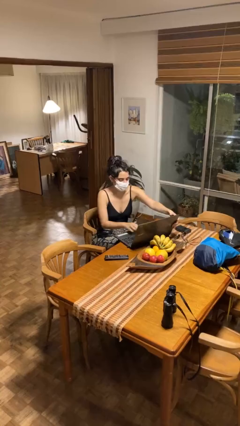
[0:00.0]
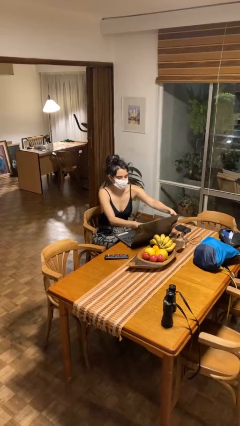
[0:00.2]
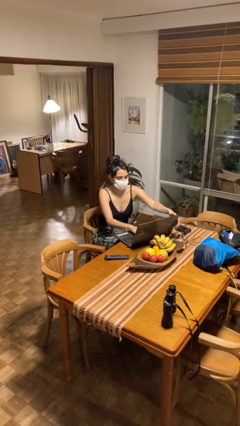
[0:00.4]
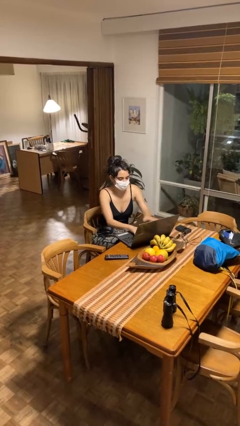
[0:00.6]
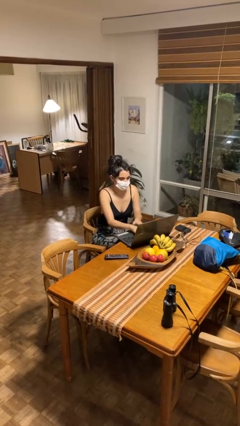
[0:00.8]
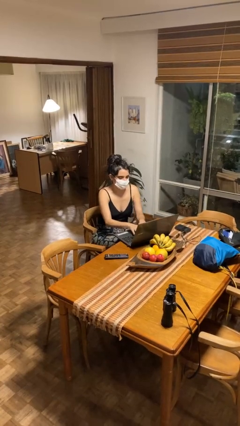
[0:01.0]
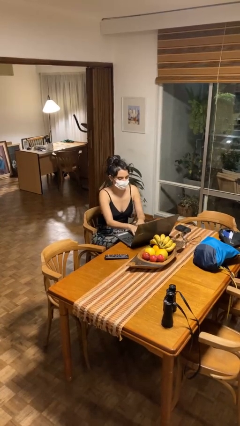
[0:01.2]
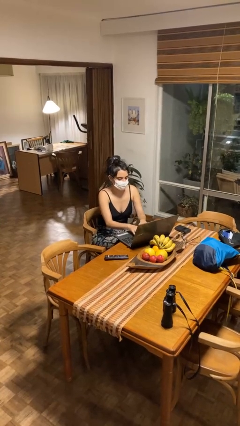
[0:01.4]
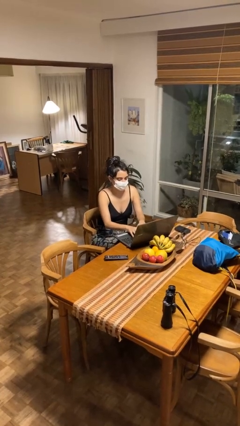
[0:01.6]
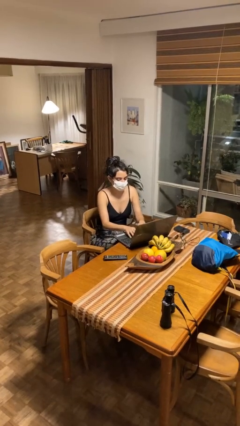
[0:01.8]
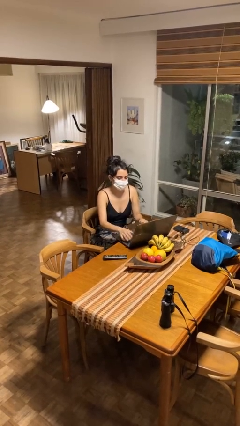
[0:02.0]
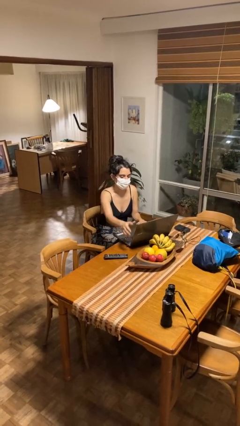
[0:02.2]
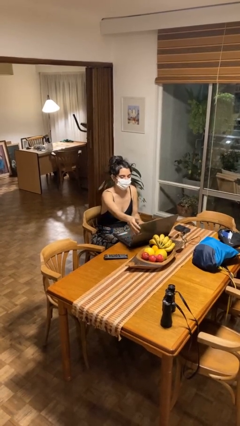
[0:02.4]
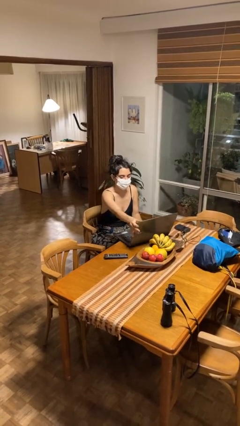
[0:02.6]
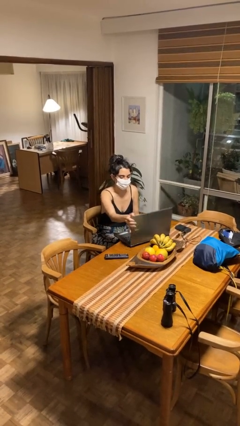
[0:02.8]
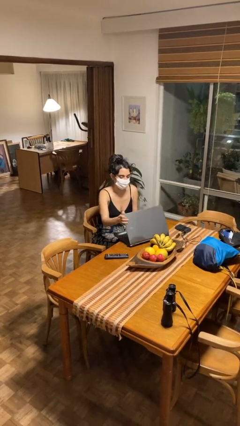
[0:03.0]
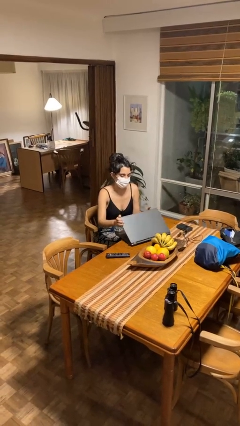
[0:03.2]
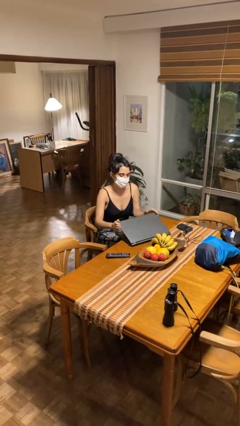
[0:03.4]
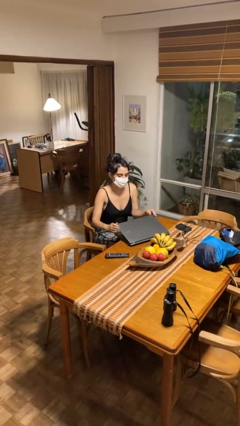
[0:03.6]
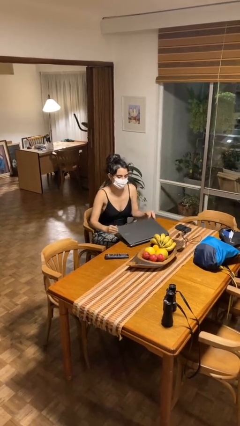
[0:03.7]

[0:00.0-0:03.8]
person interacts with laptop

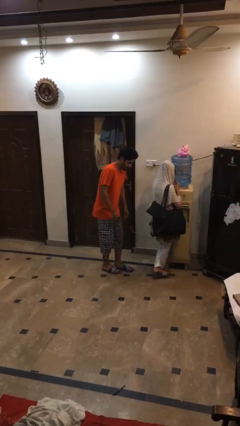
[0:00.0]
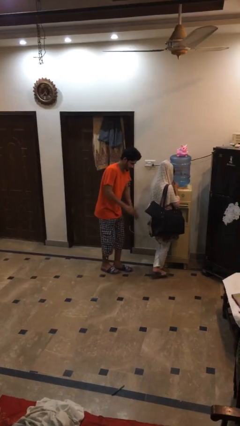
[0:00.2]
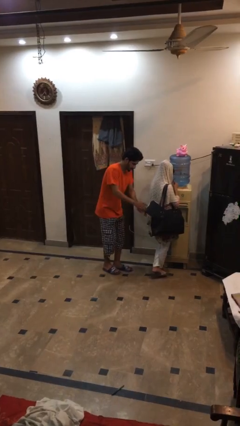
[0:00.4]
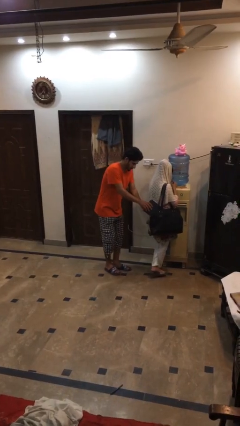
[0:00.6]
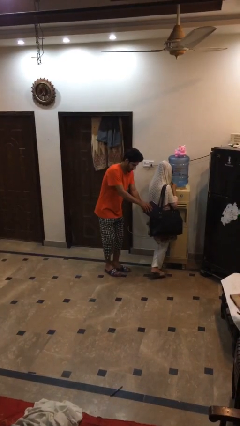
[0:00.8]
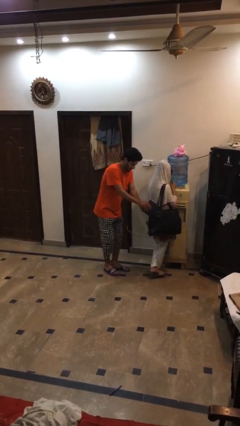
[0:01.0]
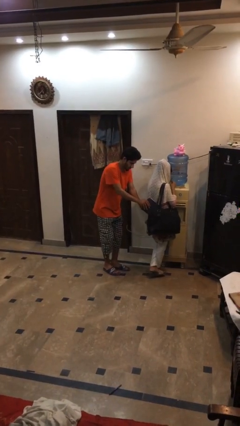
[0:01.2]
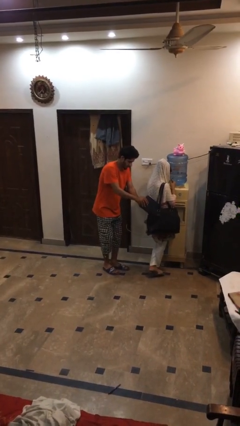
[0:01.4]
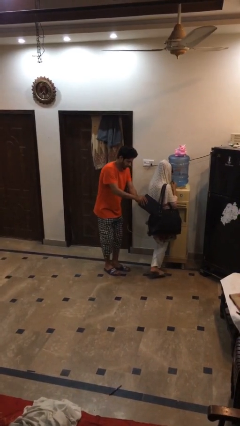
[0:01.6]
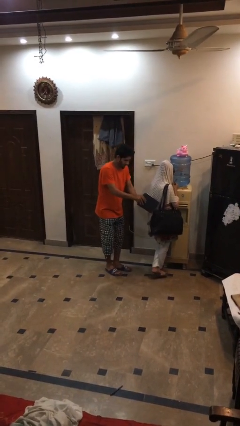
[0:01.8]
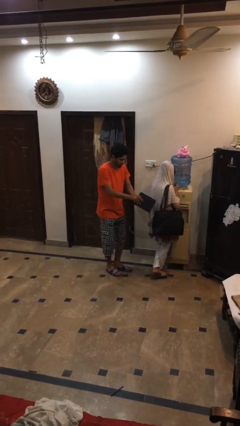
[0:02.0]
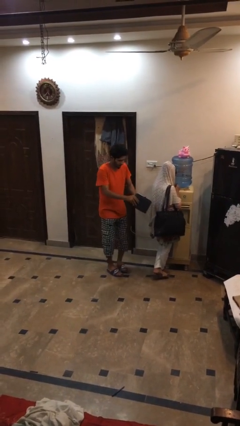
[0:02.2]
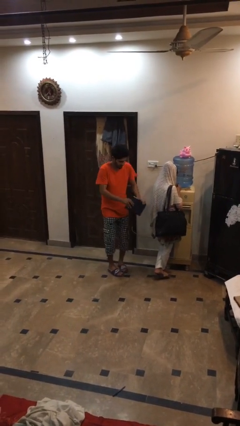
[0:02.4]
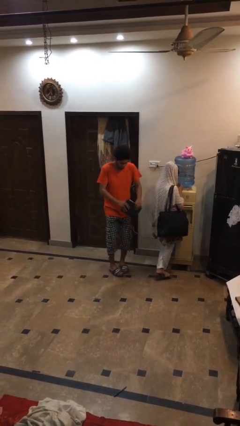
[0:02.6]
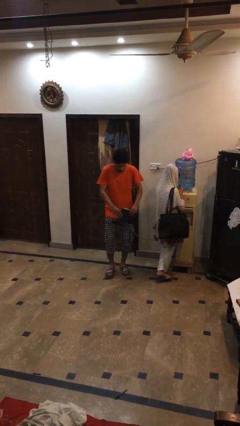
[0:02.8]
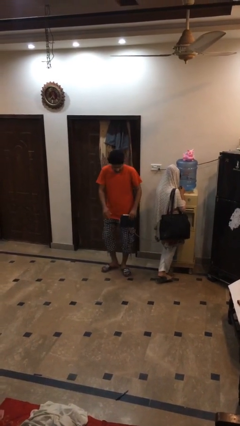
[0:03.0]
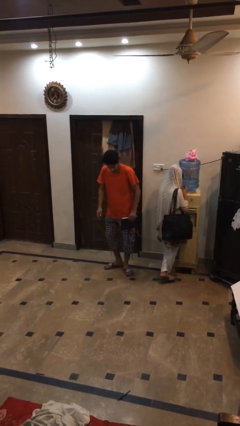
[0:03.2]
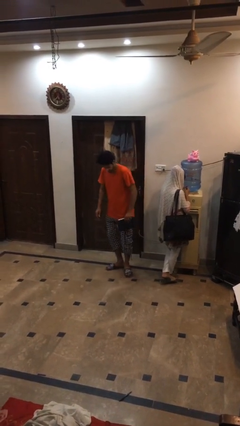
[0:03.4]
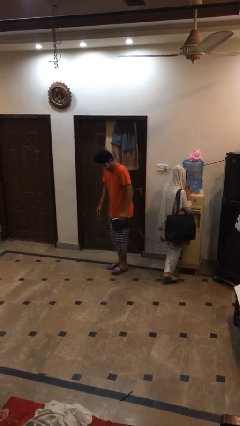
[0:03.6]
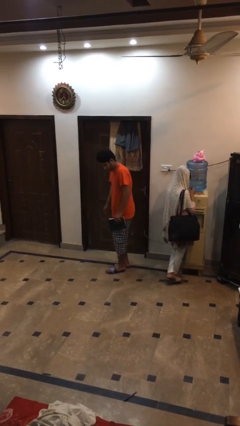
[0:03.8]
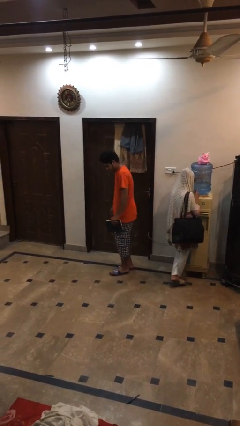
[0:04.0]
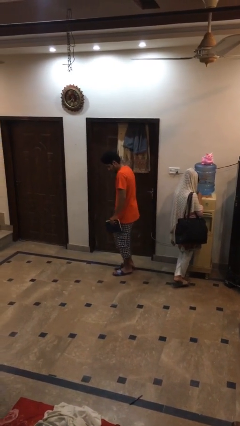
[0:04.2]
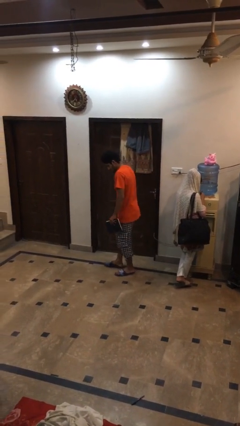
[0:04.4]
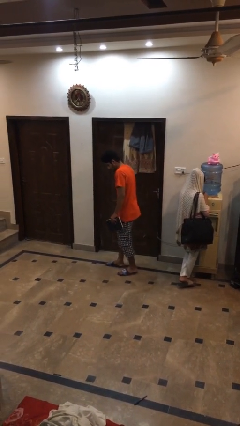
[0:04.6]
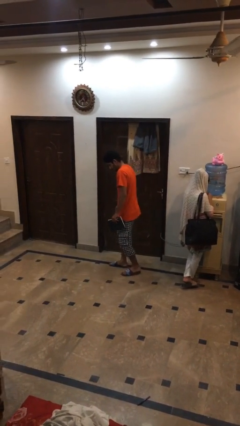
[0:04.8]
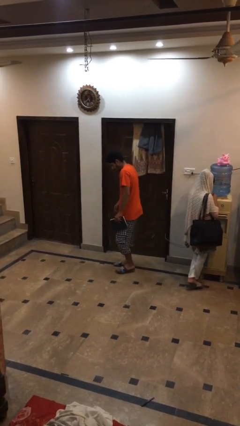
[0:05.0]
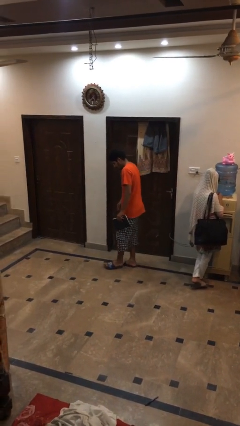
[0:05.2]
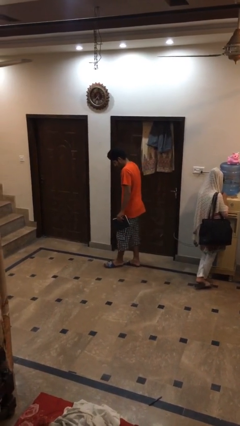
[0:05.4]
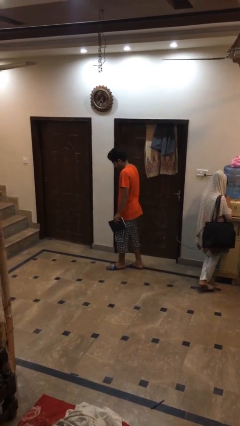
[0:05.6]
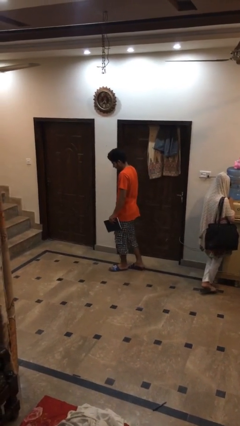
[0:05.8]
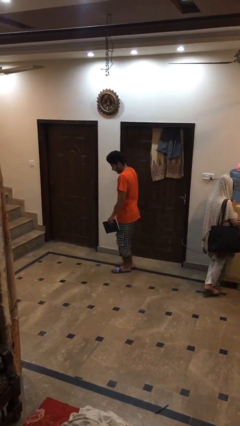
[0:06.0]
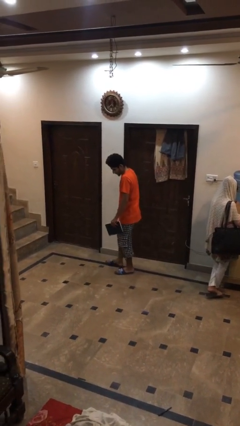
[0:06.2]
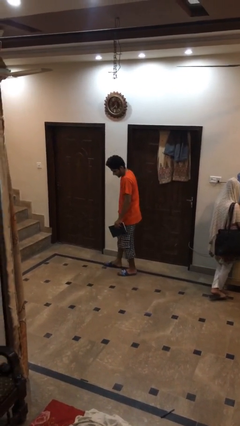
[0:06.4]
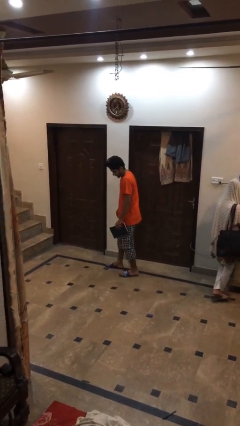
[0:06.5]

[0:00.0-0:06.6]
person steals object from person

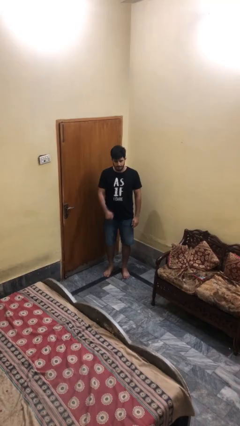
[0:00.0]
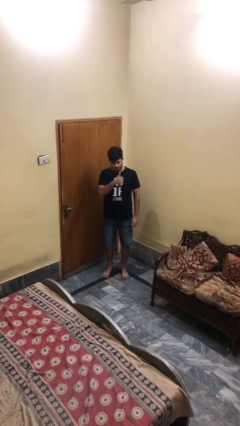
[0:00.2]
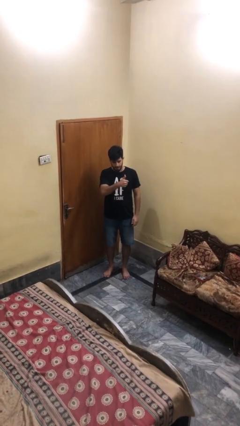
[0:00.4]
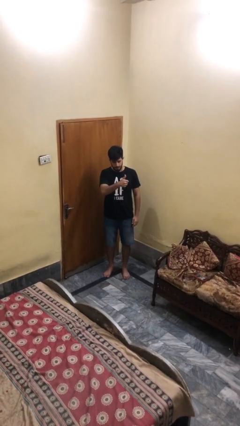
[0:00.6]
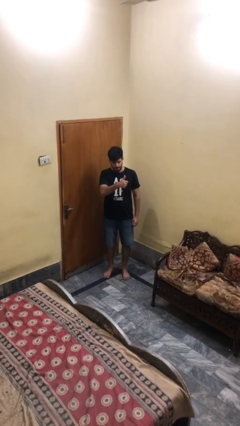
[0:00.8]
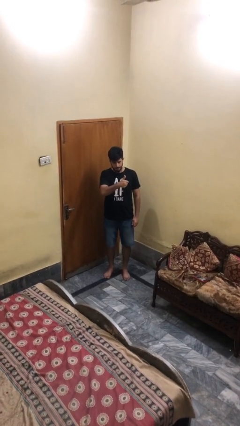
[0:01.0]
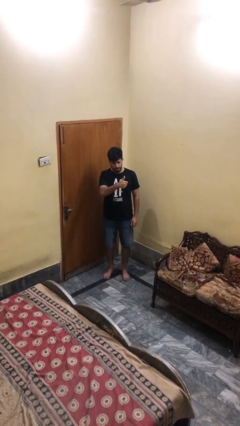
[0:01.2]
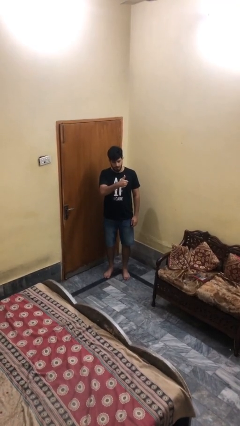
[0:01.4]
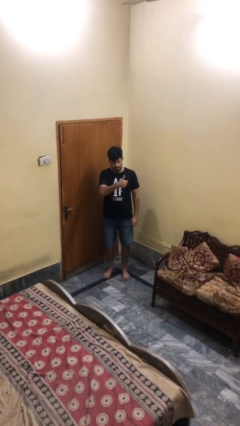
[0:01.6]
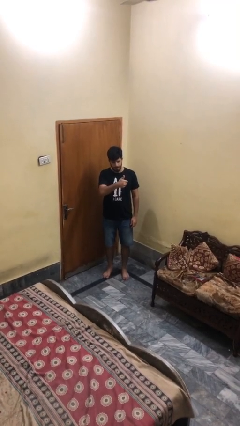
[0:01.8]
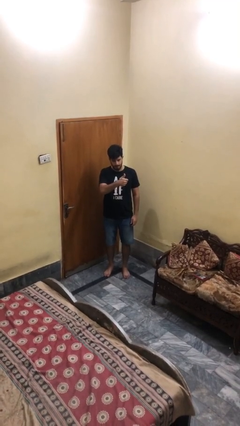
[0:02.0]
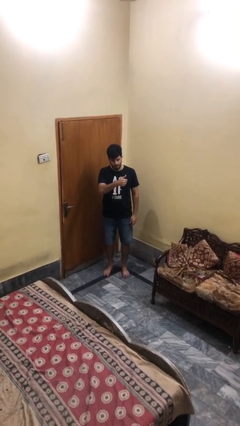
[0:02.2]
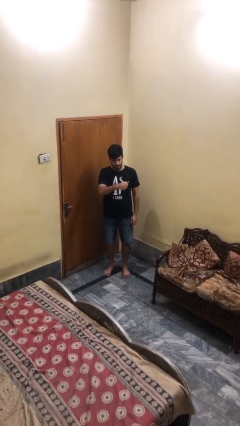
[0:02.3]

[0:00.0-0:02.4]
person gestures thumbs up

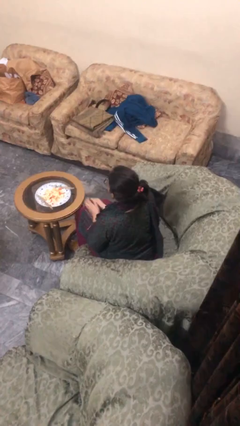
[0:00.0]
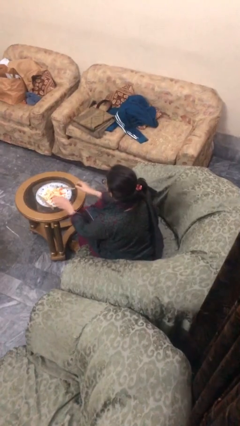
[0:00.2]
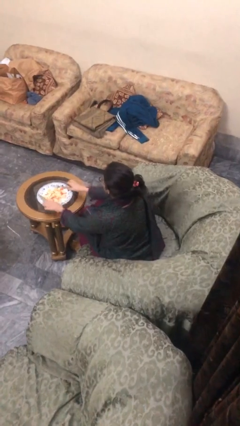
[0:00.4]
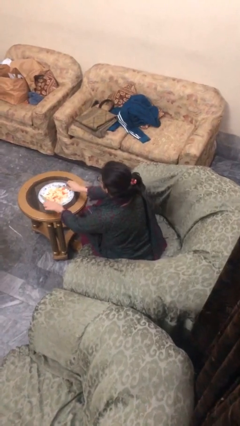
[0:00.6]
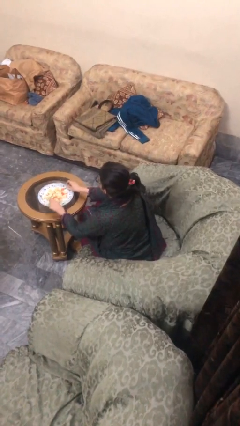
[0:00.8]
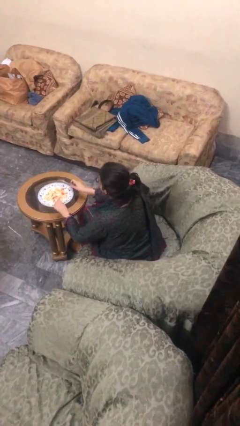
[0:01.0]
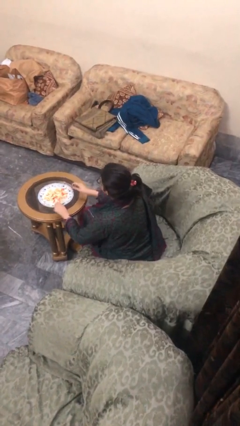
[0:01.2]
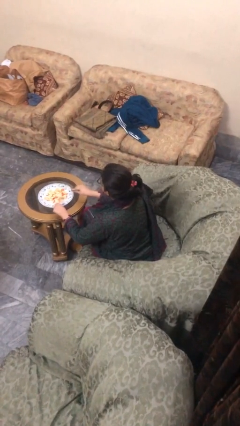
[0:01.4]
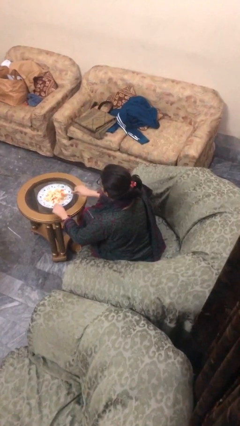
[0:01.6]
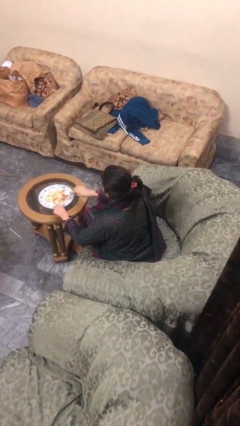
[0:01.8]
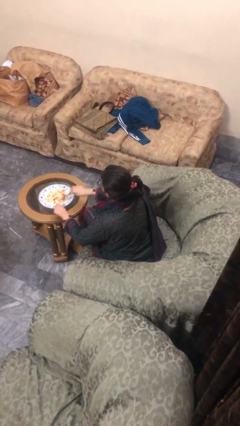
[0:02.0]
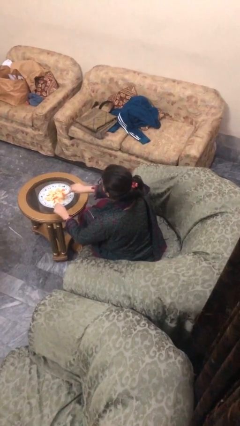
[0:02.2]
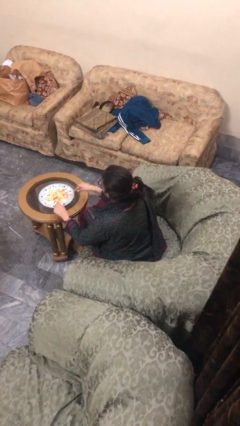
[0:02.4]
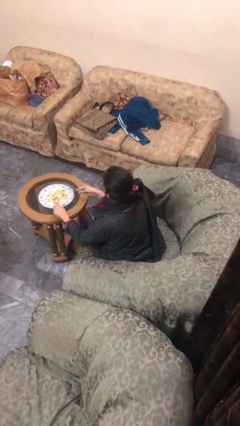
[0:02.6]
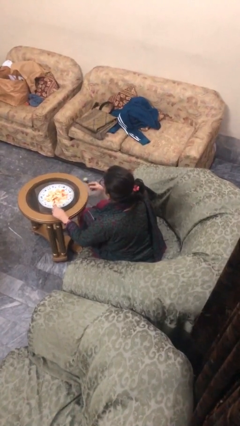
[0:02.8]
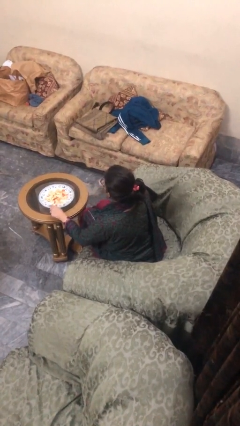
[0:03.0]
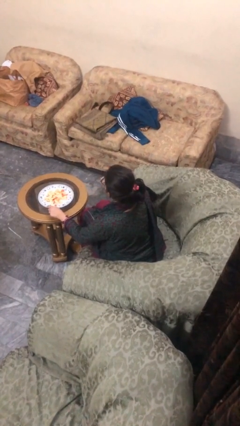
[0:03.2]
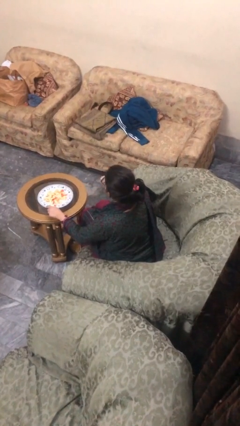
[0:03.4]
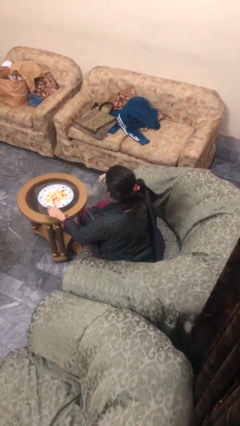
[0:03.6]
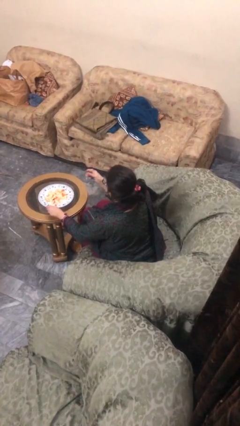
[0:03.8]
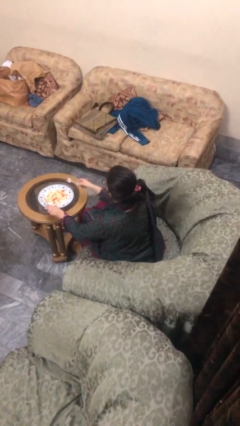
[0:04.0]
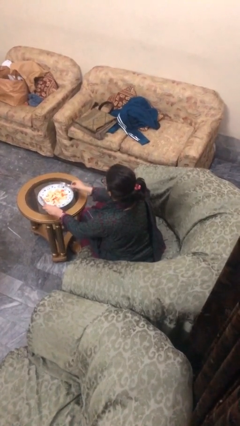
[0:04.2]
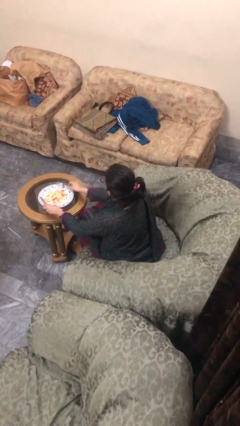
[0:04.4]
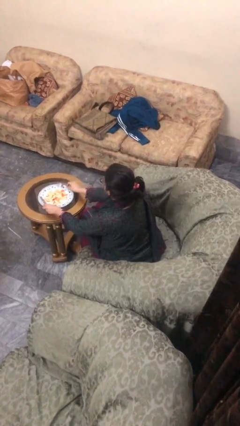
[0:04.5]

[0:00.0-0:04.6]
person eats with utensil
